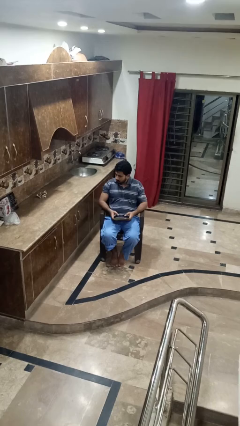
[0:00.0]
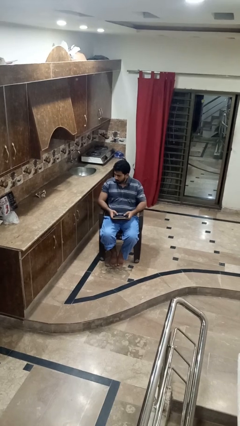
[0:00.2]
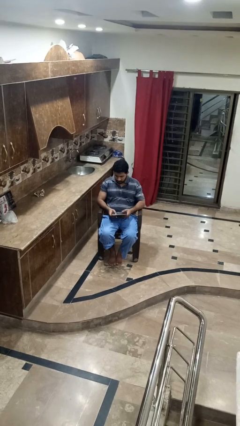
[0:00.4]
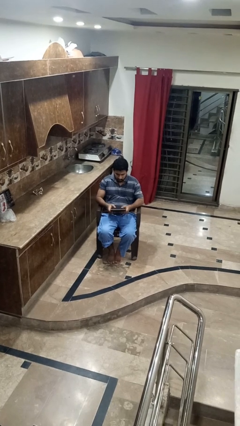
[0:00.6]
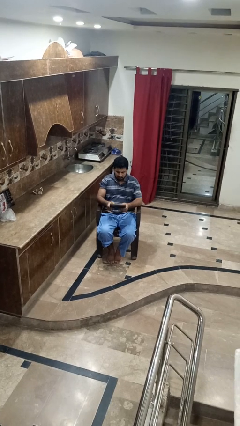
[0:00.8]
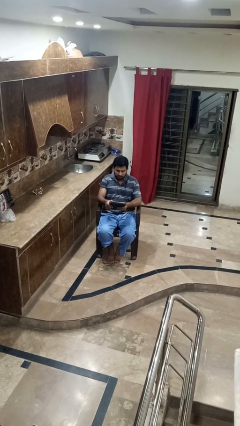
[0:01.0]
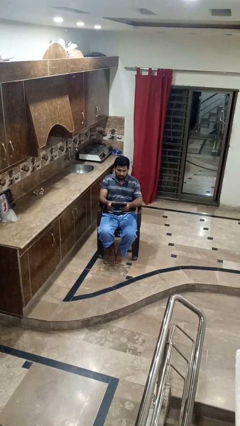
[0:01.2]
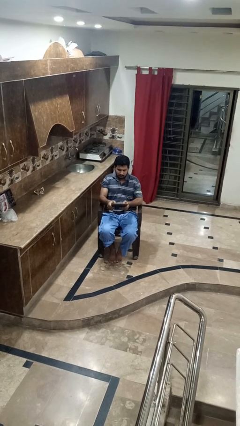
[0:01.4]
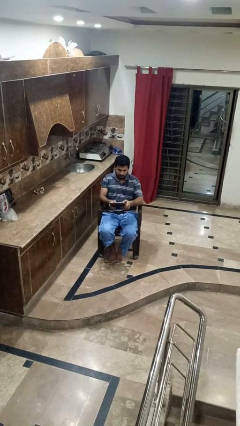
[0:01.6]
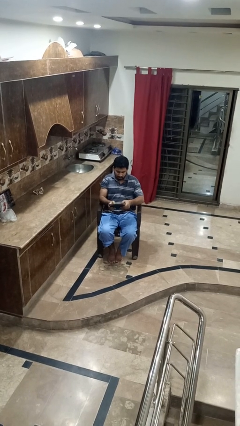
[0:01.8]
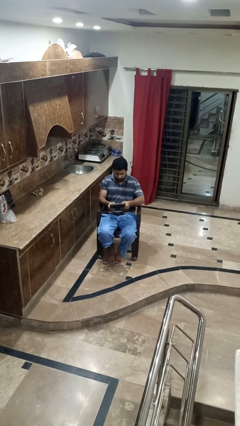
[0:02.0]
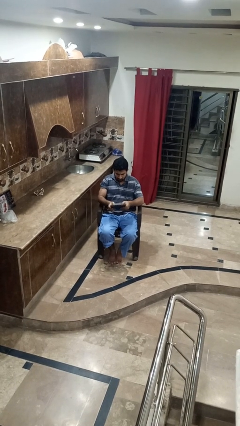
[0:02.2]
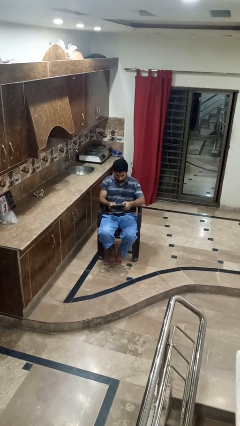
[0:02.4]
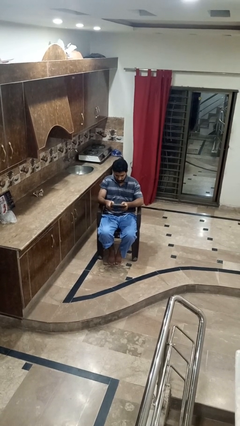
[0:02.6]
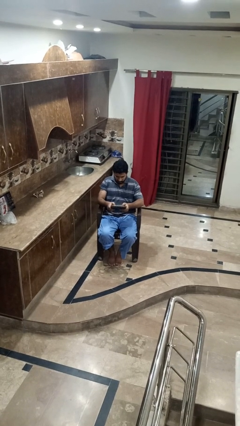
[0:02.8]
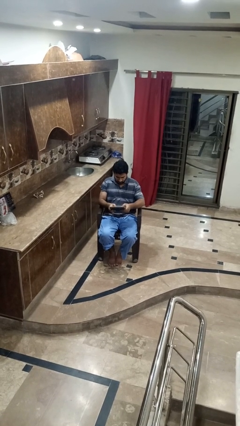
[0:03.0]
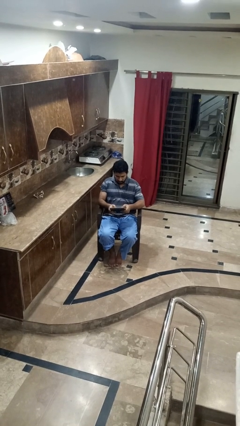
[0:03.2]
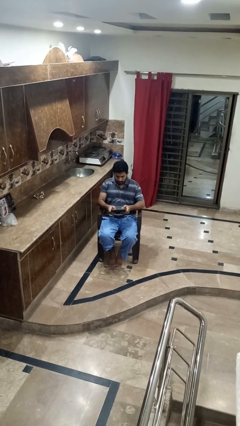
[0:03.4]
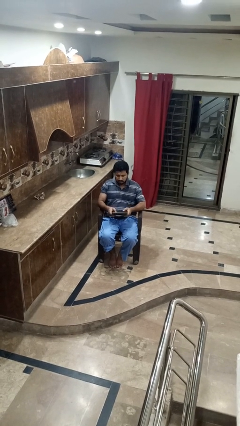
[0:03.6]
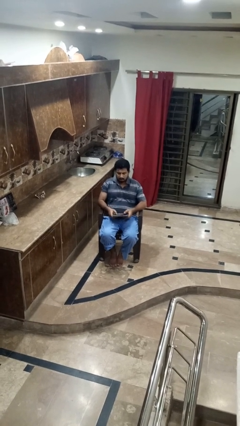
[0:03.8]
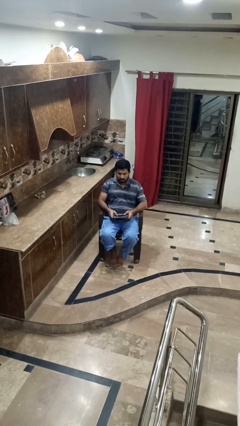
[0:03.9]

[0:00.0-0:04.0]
person interacts with handheld game

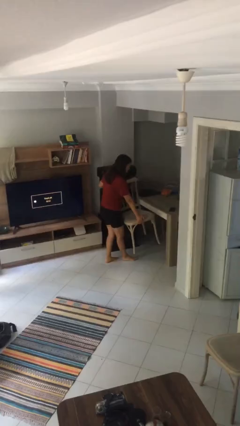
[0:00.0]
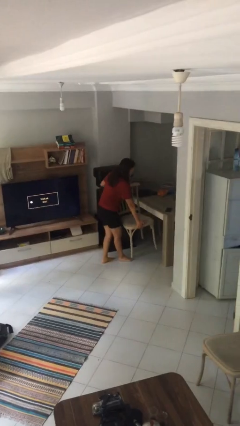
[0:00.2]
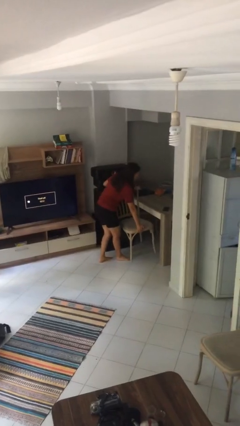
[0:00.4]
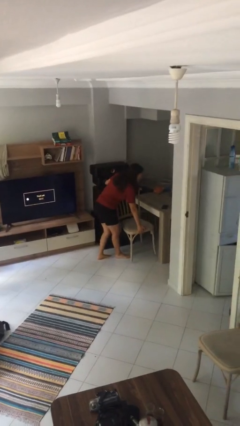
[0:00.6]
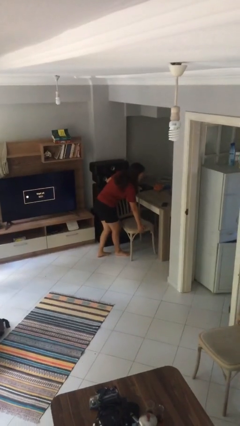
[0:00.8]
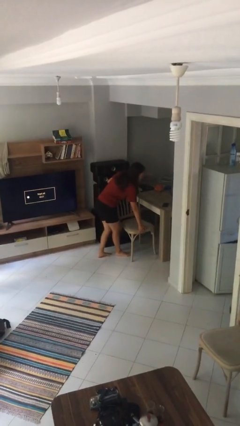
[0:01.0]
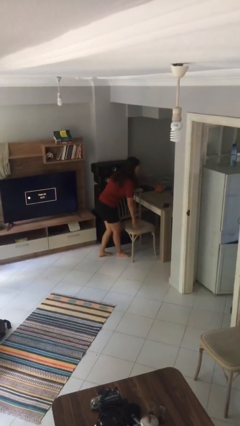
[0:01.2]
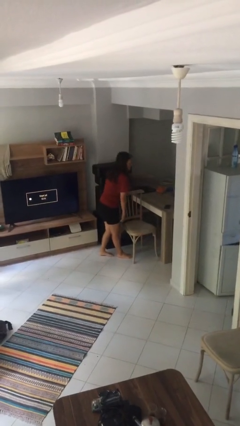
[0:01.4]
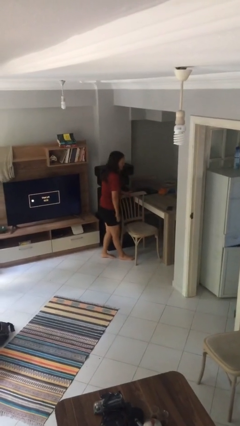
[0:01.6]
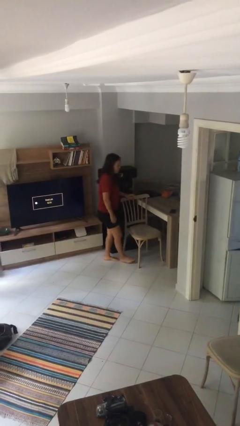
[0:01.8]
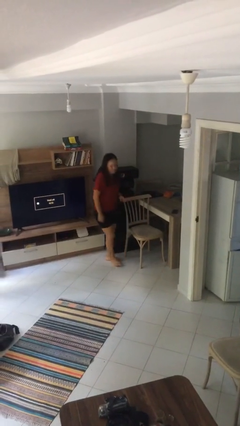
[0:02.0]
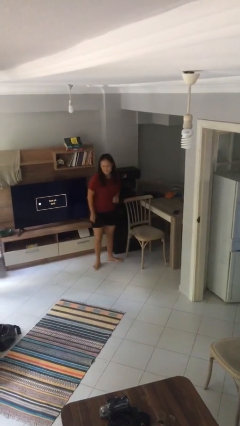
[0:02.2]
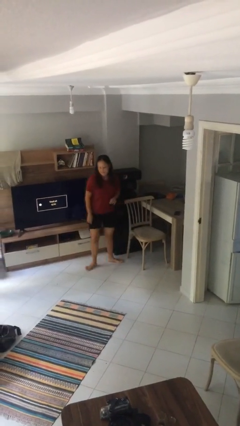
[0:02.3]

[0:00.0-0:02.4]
person puts down object on floor

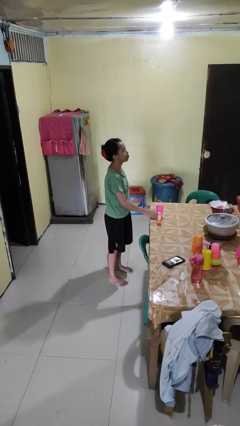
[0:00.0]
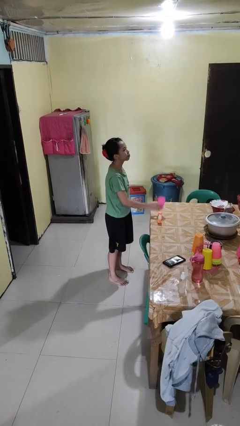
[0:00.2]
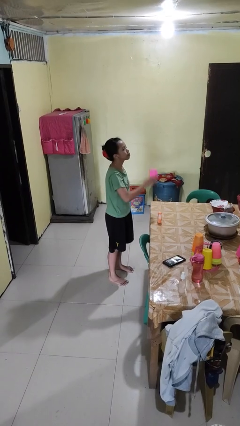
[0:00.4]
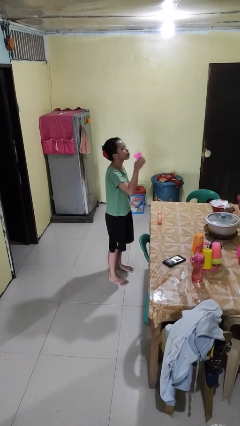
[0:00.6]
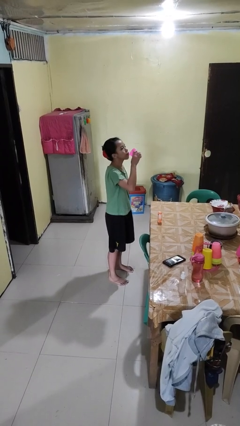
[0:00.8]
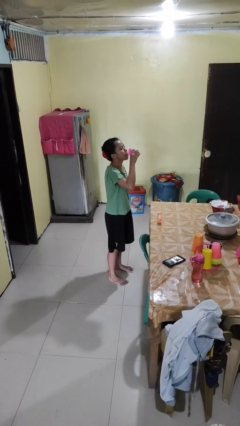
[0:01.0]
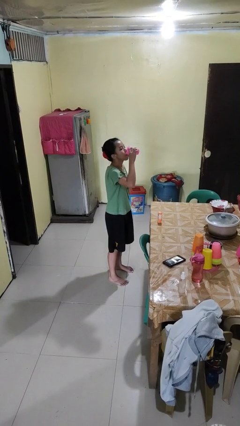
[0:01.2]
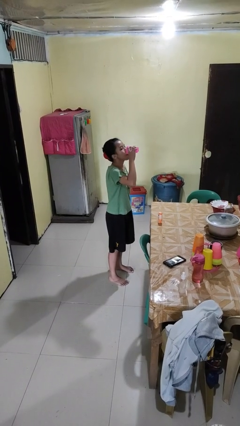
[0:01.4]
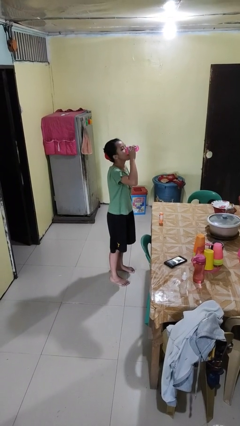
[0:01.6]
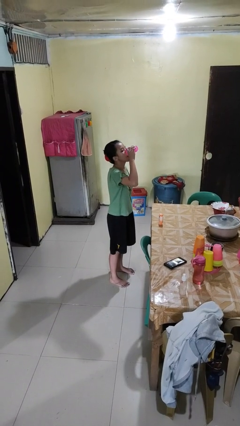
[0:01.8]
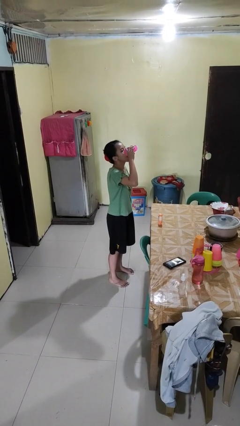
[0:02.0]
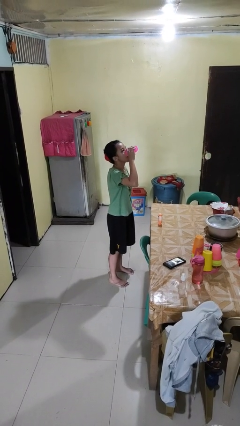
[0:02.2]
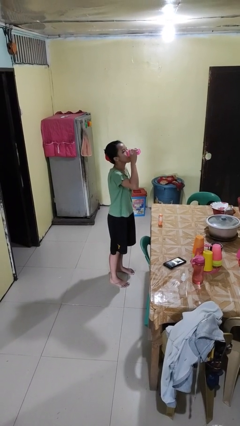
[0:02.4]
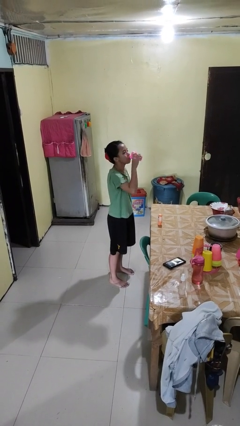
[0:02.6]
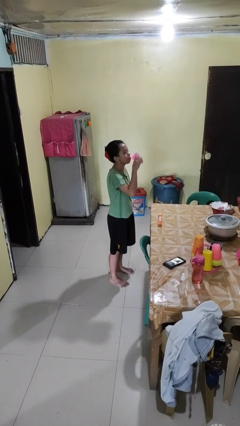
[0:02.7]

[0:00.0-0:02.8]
person drinks from cup

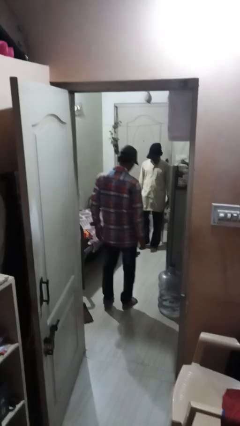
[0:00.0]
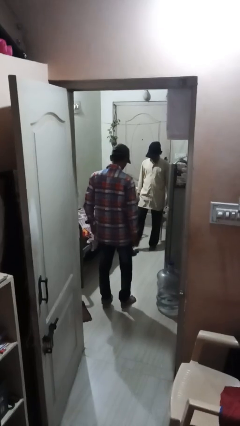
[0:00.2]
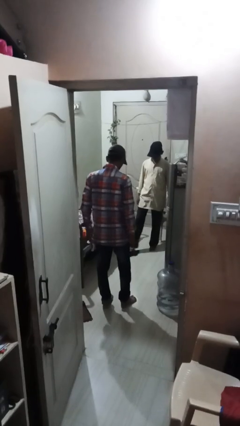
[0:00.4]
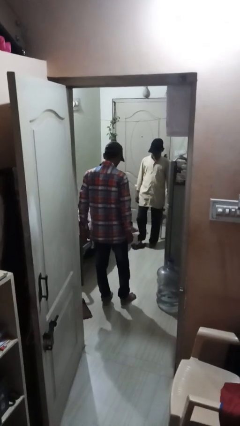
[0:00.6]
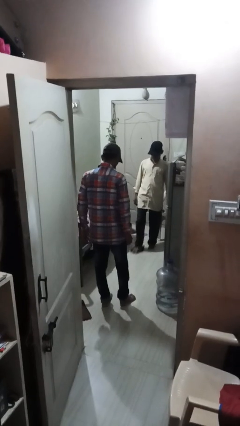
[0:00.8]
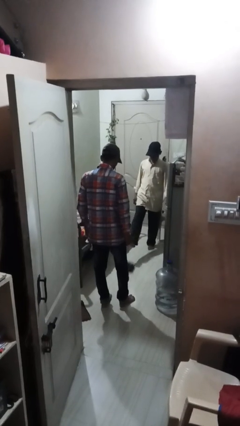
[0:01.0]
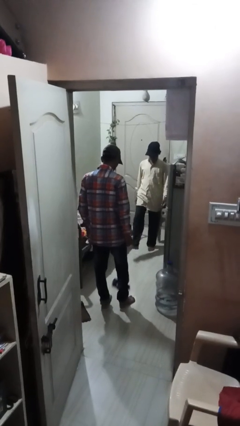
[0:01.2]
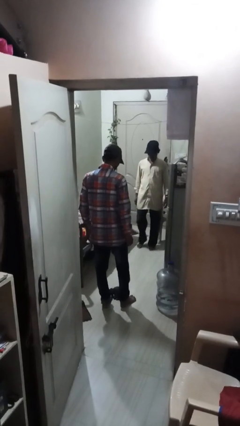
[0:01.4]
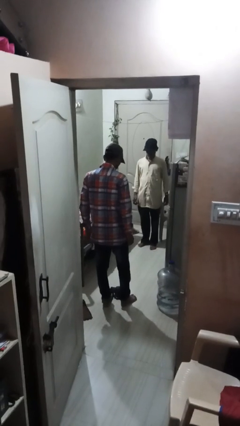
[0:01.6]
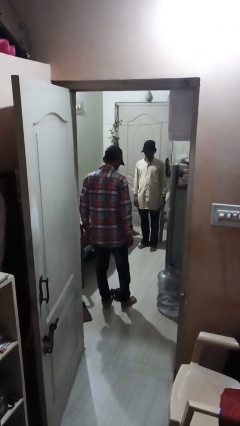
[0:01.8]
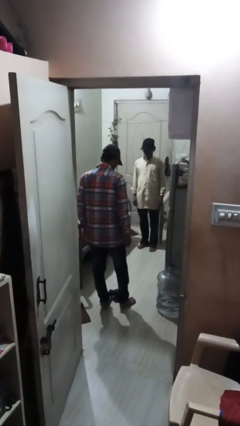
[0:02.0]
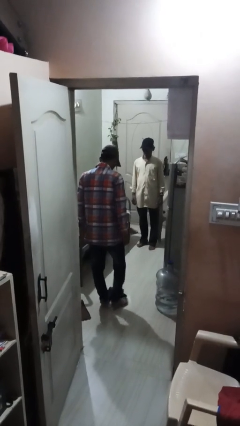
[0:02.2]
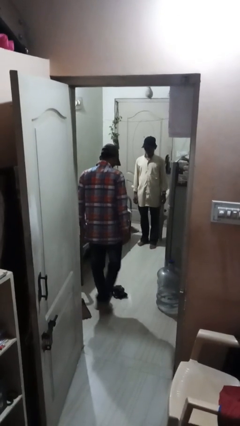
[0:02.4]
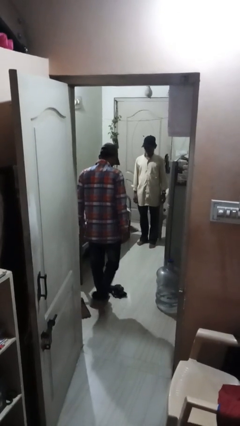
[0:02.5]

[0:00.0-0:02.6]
person kicks object to person

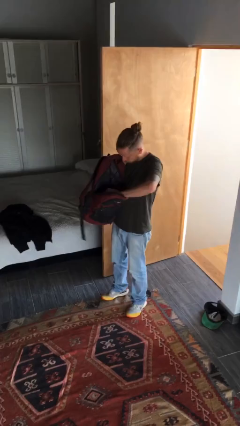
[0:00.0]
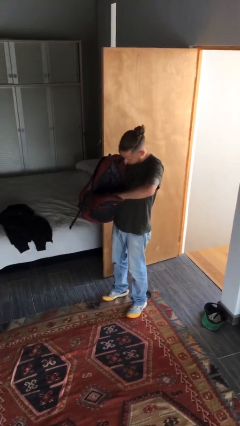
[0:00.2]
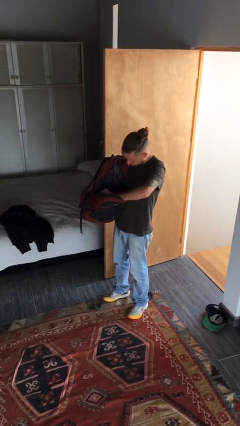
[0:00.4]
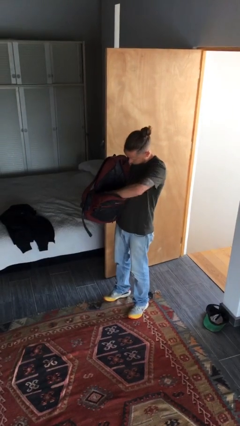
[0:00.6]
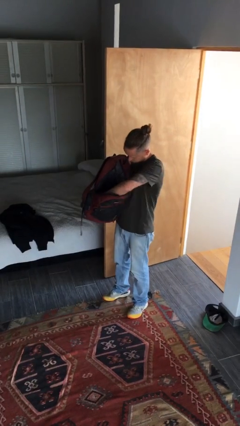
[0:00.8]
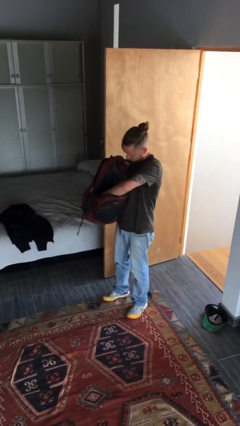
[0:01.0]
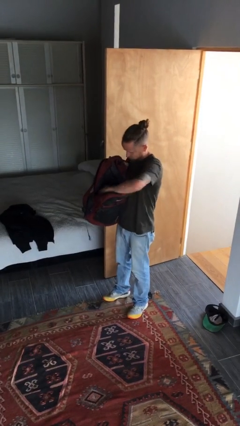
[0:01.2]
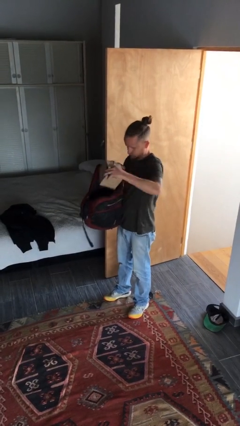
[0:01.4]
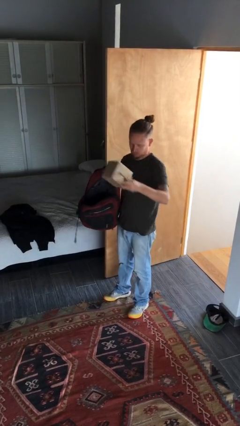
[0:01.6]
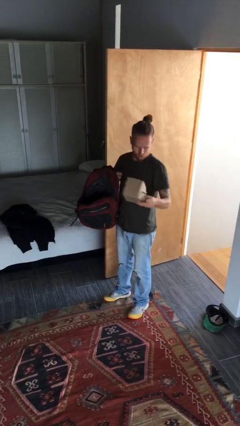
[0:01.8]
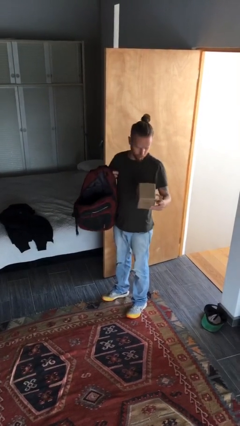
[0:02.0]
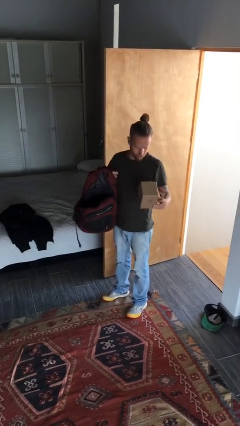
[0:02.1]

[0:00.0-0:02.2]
person takes object from backpack

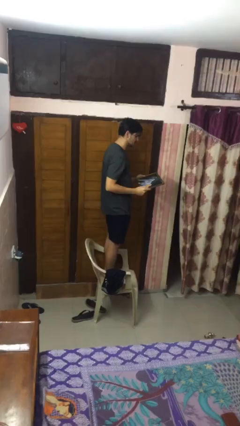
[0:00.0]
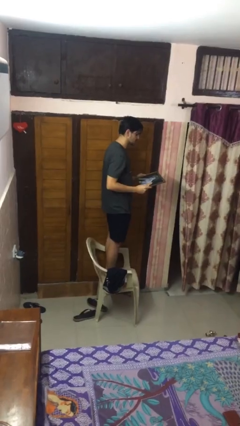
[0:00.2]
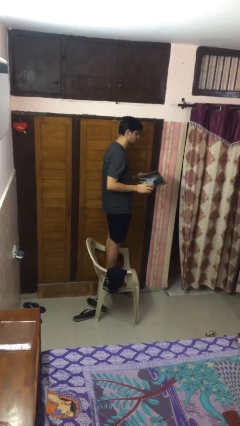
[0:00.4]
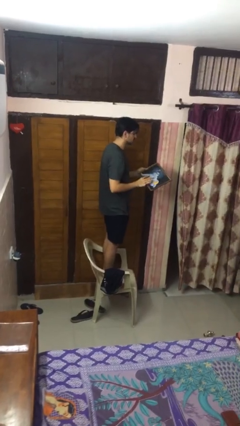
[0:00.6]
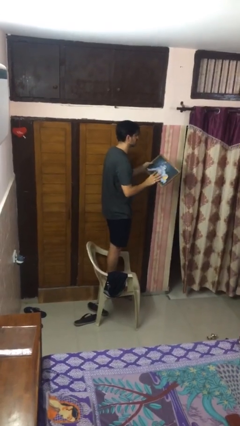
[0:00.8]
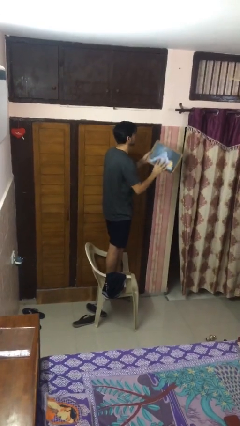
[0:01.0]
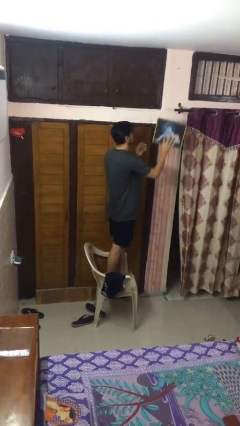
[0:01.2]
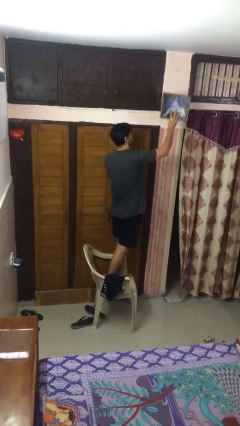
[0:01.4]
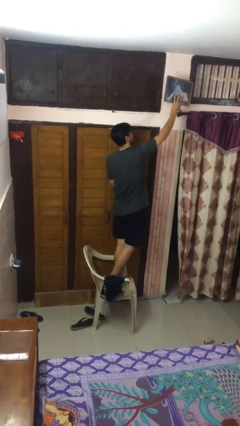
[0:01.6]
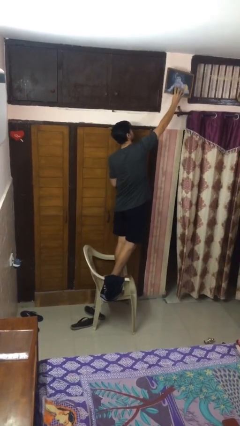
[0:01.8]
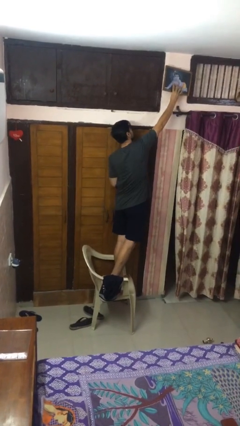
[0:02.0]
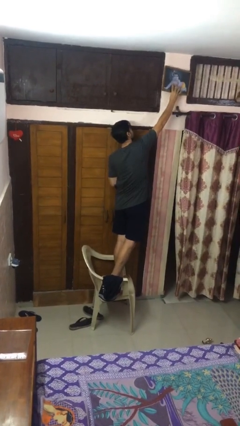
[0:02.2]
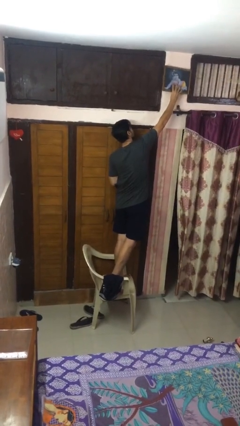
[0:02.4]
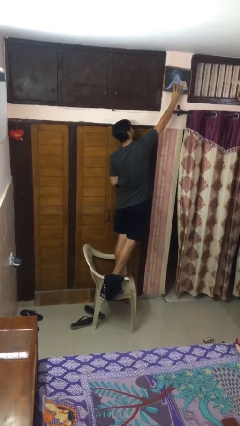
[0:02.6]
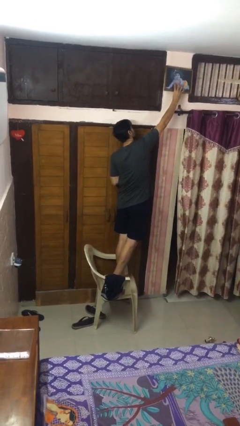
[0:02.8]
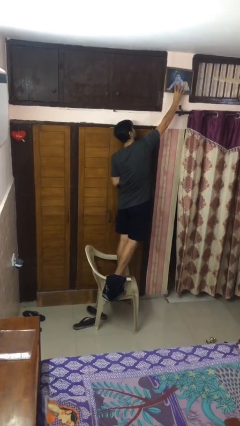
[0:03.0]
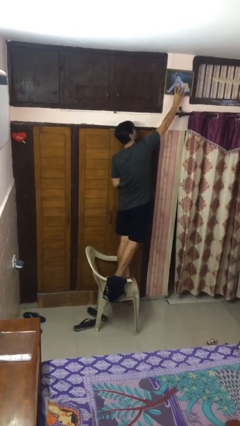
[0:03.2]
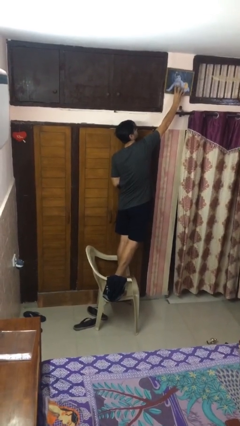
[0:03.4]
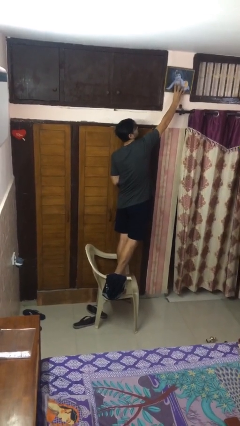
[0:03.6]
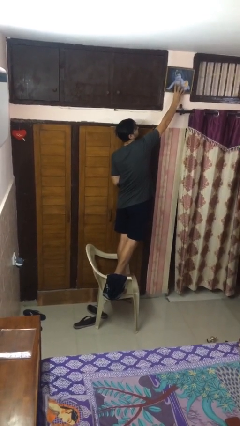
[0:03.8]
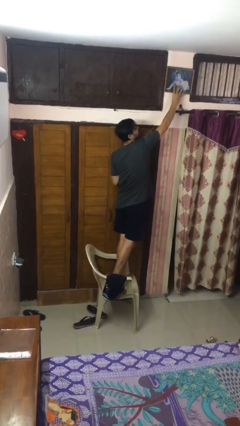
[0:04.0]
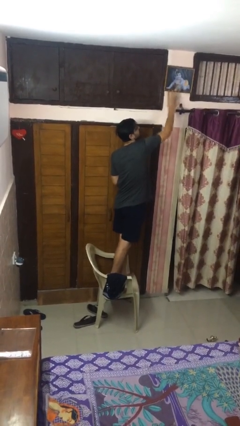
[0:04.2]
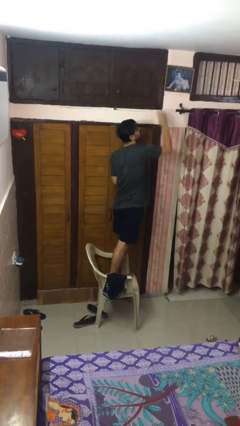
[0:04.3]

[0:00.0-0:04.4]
person puts up picture frame
